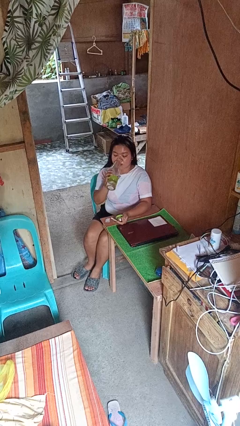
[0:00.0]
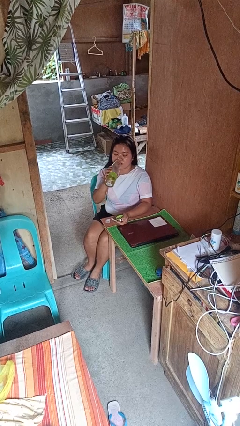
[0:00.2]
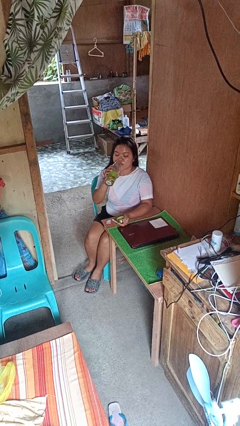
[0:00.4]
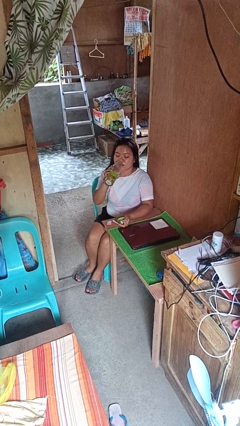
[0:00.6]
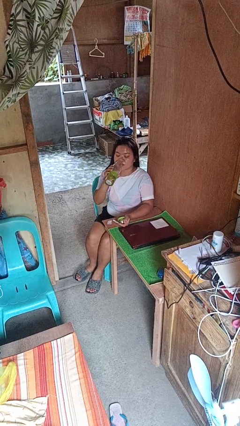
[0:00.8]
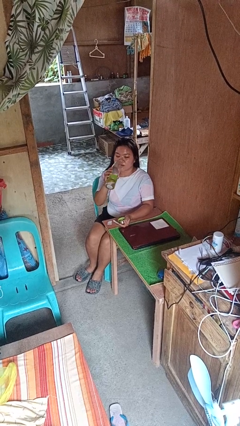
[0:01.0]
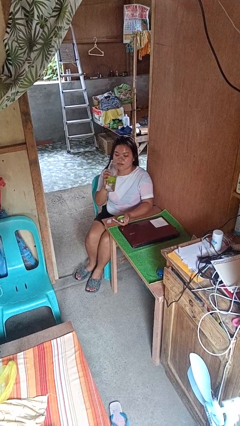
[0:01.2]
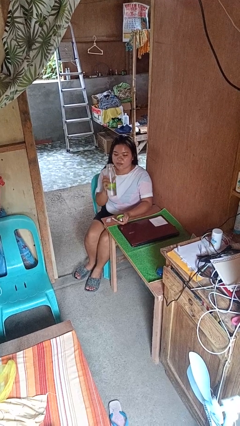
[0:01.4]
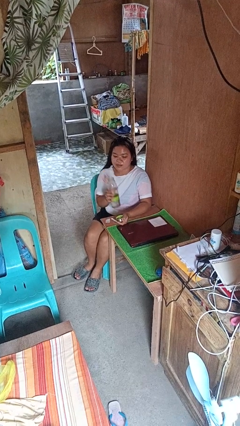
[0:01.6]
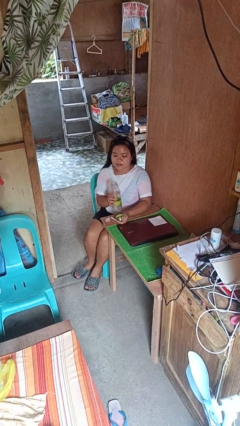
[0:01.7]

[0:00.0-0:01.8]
person drinks from bottle

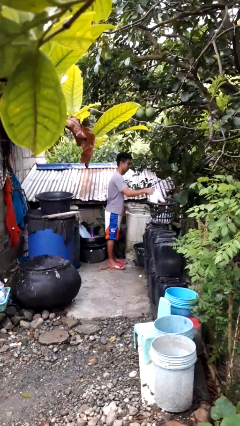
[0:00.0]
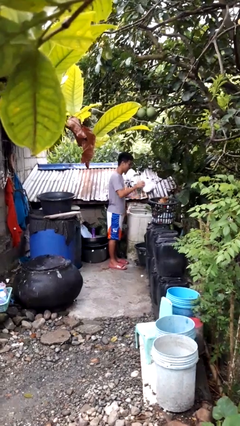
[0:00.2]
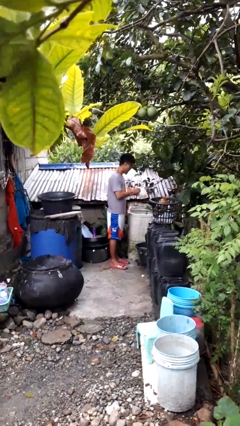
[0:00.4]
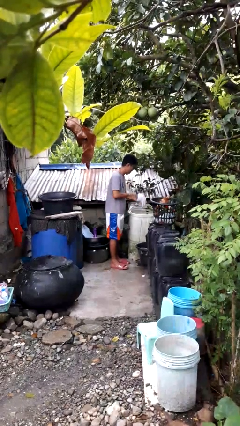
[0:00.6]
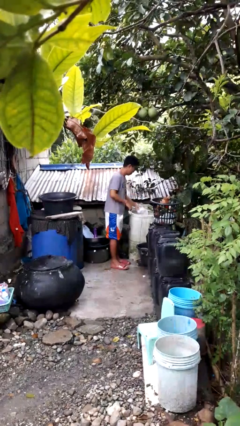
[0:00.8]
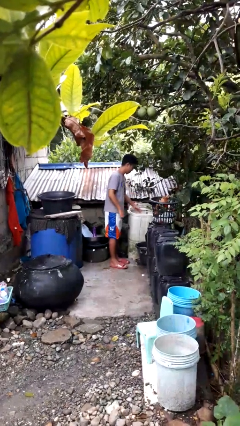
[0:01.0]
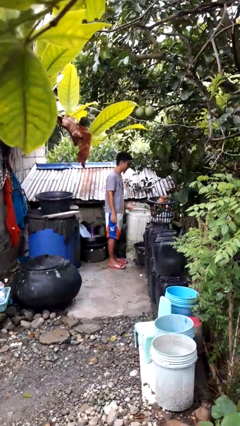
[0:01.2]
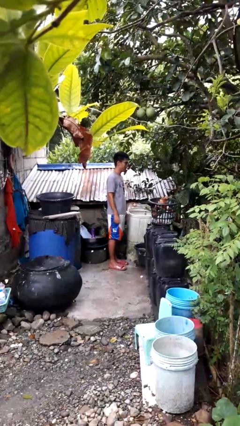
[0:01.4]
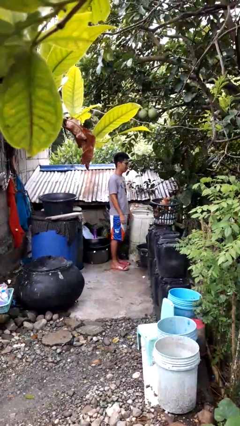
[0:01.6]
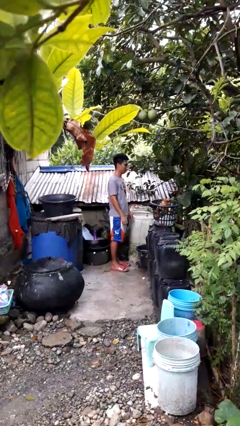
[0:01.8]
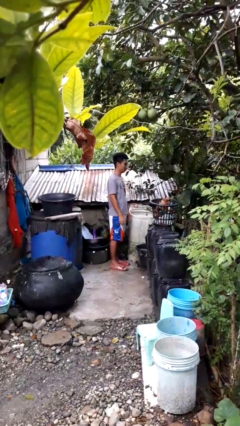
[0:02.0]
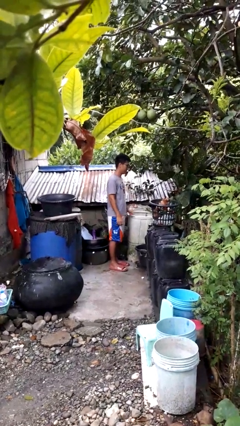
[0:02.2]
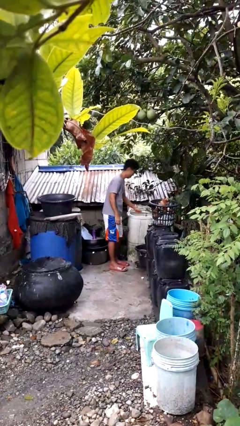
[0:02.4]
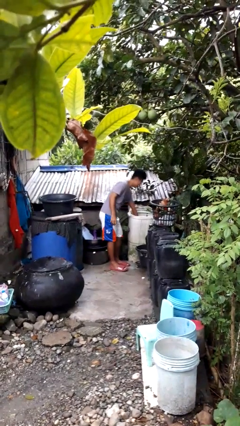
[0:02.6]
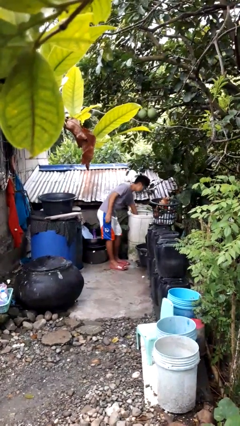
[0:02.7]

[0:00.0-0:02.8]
person loads clotheswasher

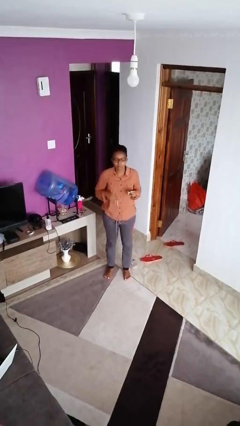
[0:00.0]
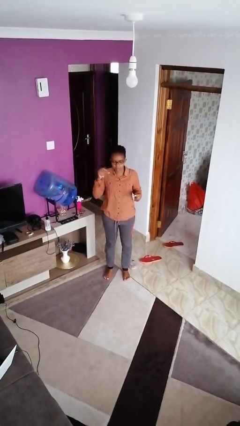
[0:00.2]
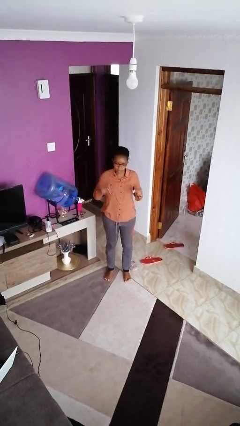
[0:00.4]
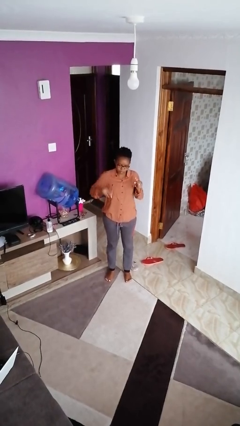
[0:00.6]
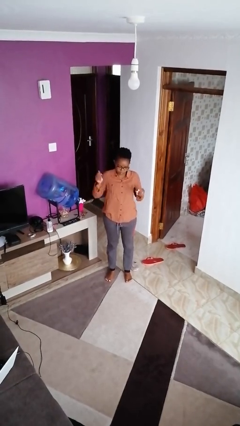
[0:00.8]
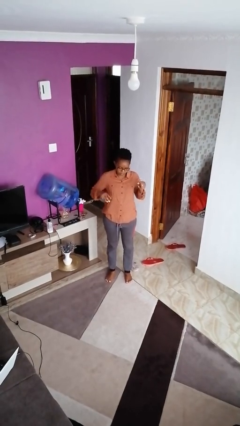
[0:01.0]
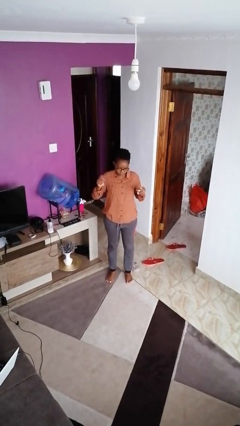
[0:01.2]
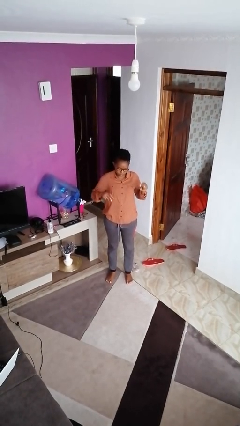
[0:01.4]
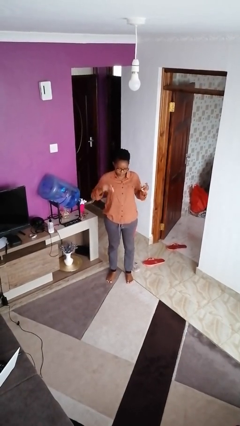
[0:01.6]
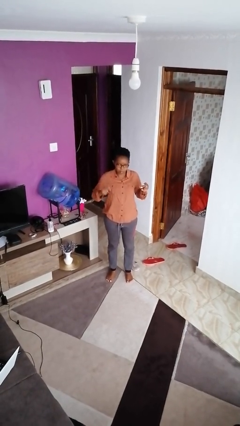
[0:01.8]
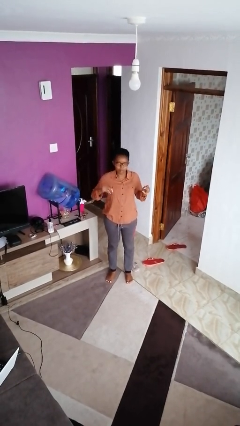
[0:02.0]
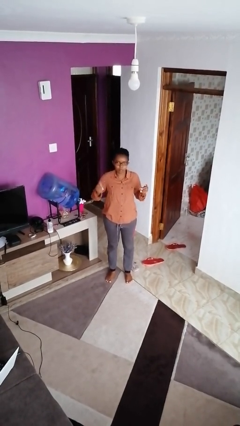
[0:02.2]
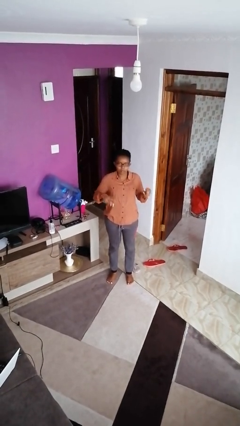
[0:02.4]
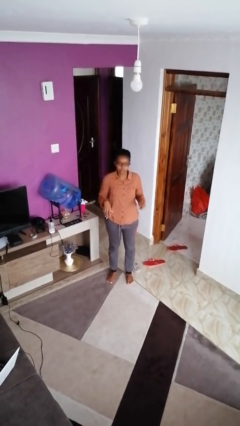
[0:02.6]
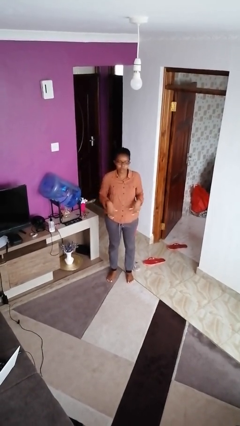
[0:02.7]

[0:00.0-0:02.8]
person snaps fingers

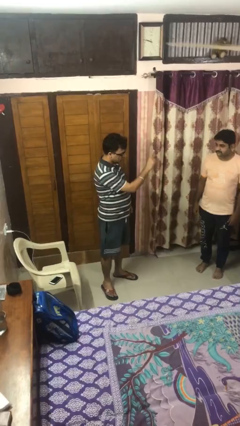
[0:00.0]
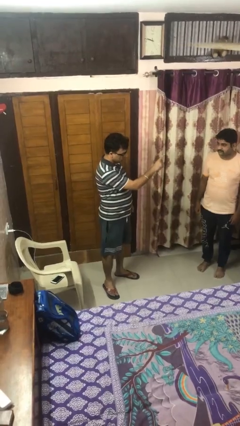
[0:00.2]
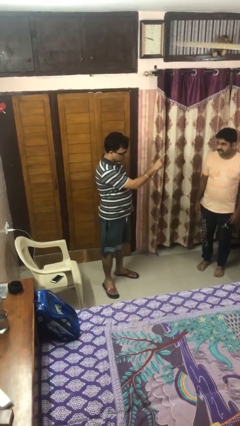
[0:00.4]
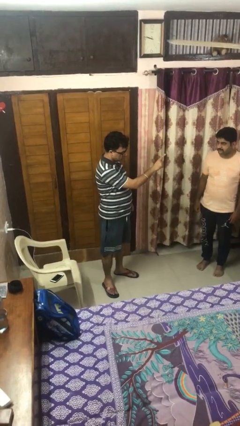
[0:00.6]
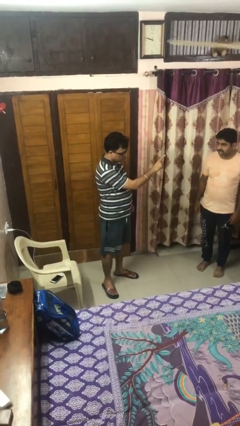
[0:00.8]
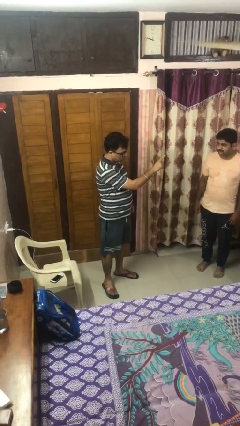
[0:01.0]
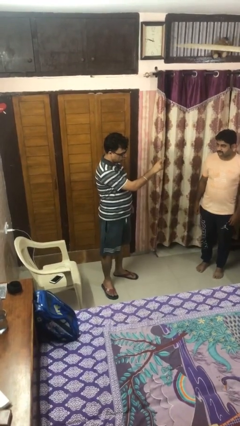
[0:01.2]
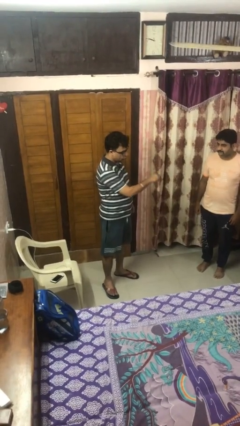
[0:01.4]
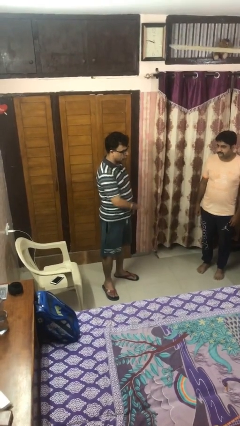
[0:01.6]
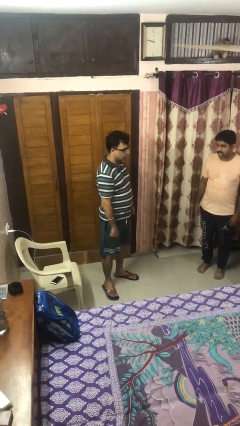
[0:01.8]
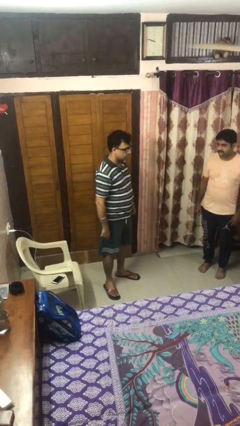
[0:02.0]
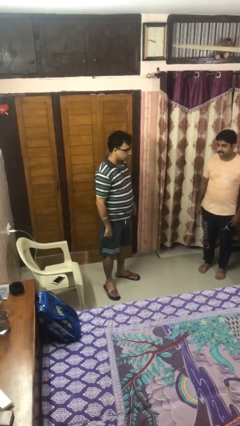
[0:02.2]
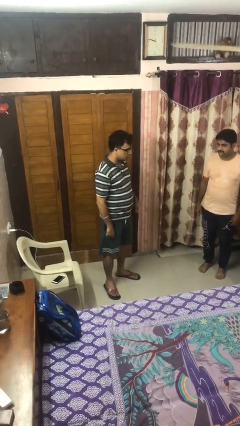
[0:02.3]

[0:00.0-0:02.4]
person points at person

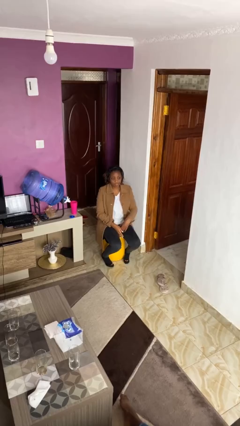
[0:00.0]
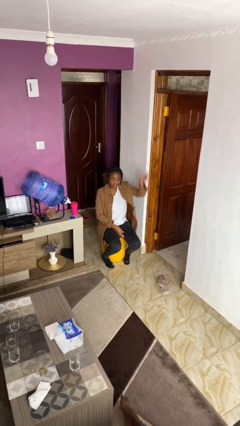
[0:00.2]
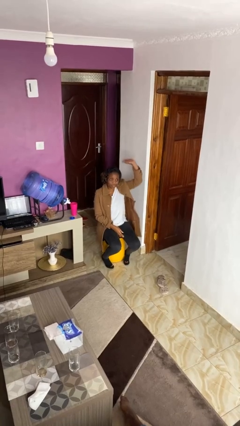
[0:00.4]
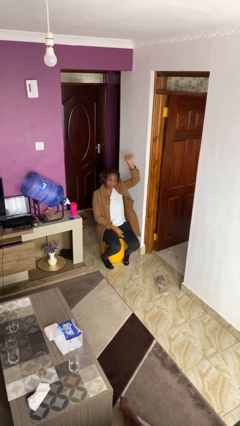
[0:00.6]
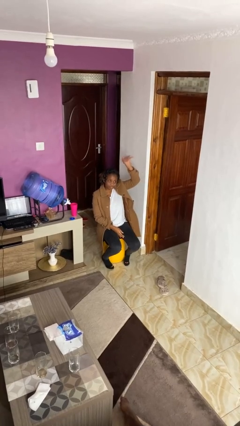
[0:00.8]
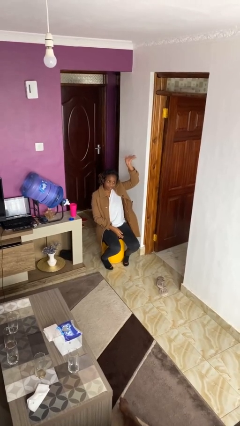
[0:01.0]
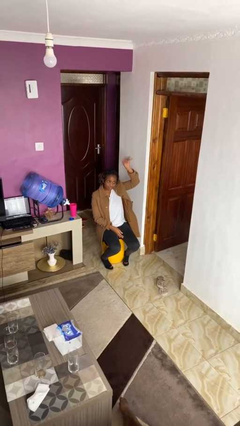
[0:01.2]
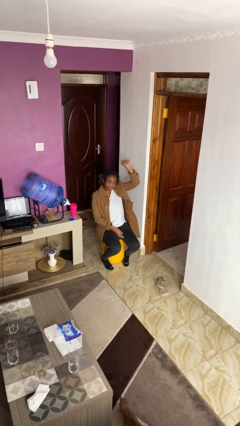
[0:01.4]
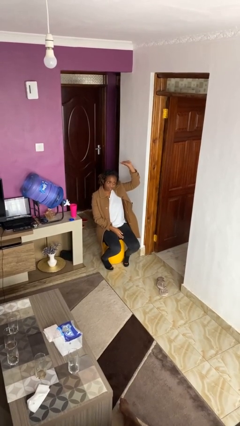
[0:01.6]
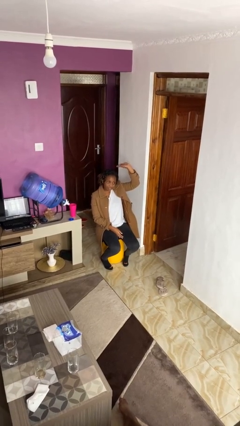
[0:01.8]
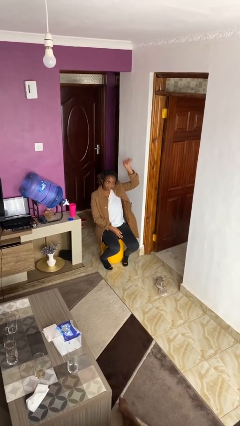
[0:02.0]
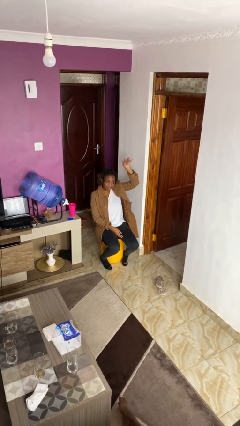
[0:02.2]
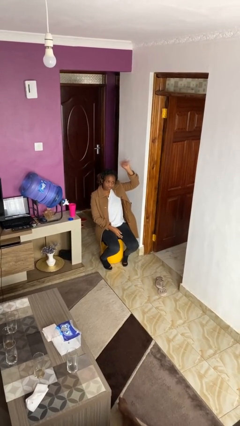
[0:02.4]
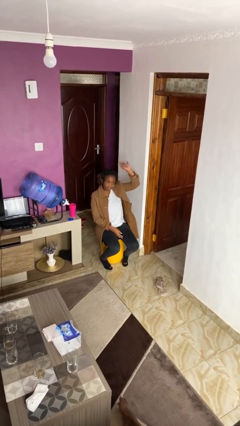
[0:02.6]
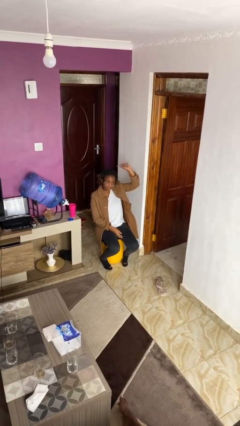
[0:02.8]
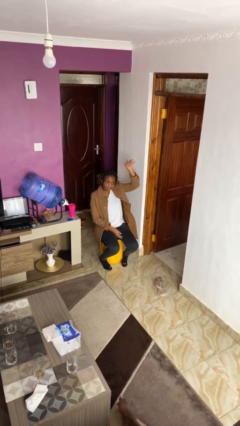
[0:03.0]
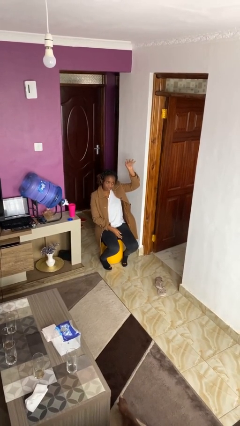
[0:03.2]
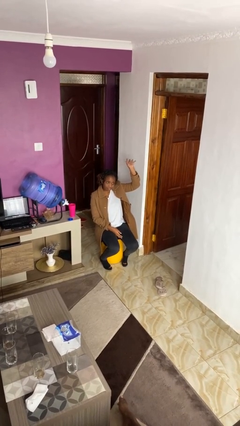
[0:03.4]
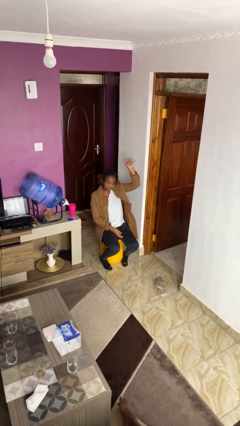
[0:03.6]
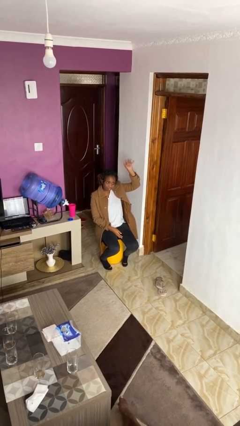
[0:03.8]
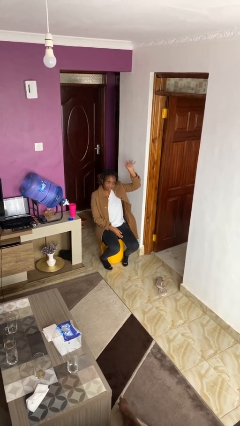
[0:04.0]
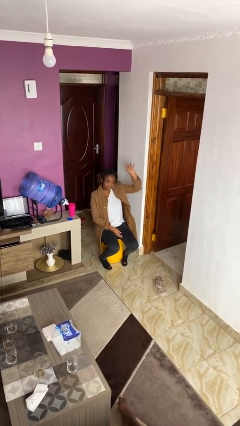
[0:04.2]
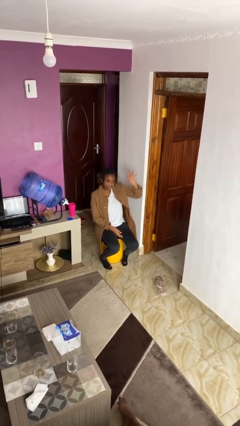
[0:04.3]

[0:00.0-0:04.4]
person gestures raise hand

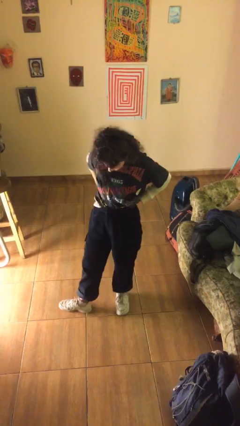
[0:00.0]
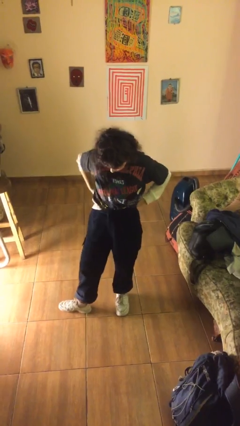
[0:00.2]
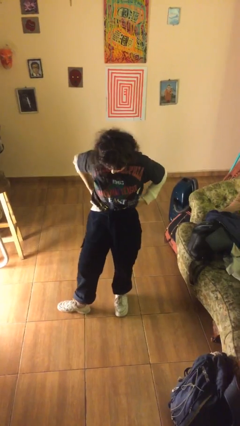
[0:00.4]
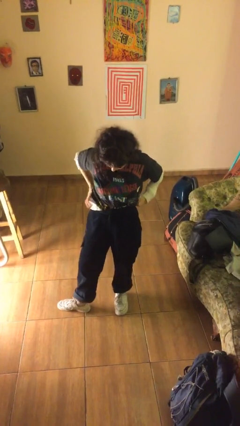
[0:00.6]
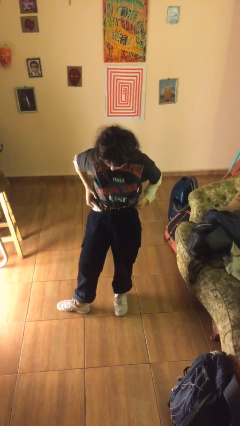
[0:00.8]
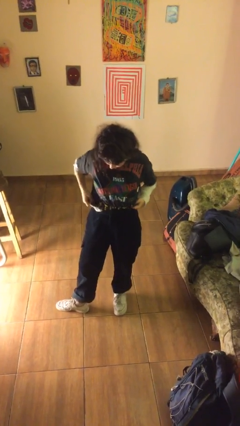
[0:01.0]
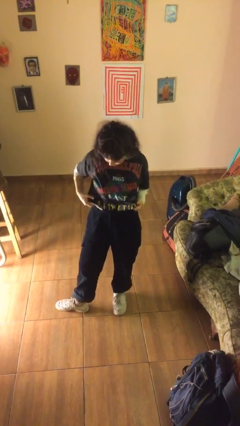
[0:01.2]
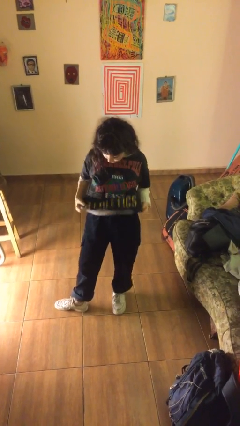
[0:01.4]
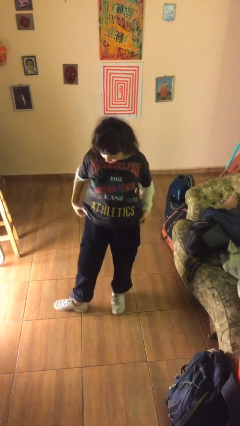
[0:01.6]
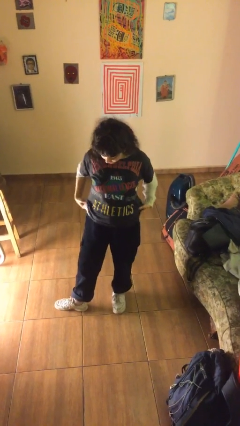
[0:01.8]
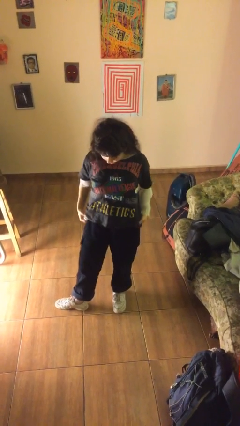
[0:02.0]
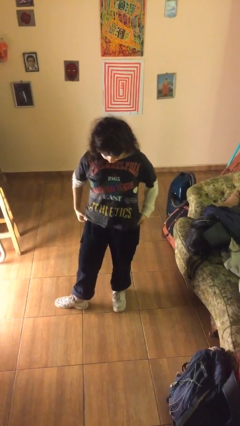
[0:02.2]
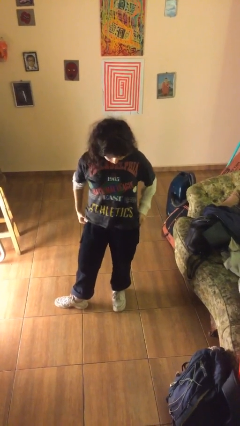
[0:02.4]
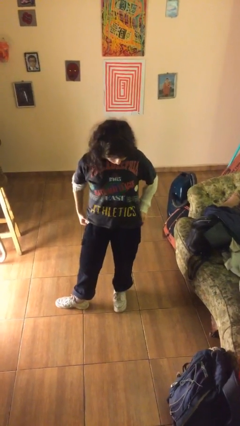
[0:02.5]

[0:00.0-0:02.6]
person untucks shirt

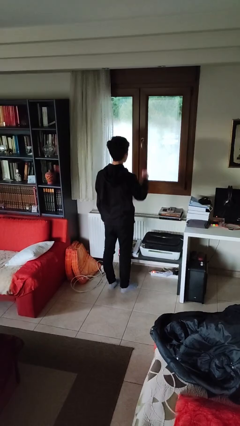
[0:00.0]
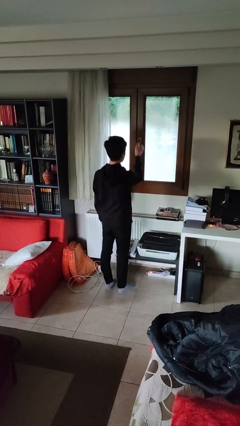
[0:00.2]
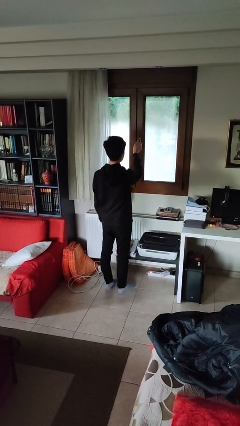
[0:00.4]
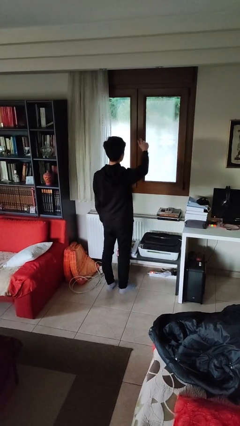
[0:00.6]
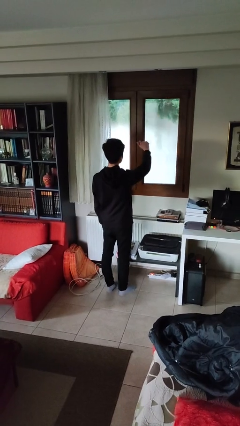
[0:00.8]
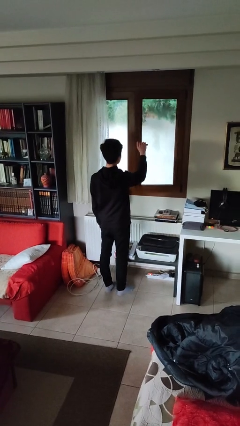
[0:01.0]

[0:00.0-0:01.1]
person opens home window
